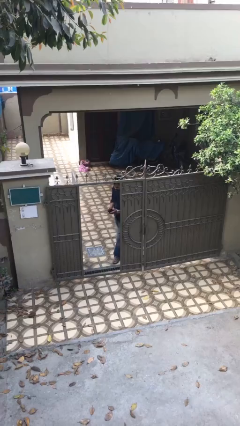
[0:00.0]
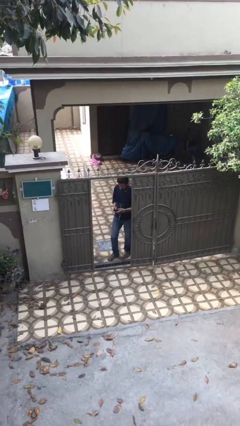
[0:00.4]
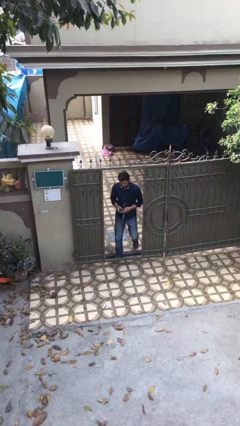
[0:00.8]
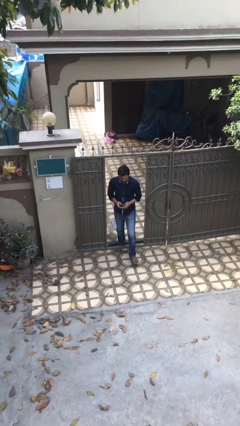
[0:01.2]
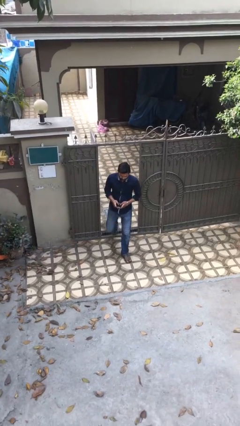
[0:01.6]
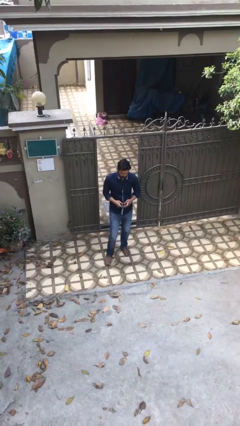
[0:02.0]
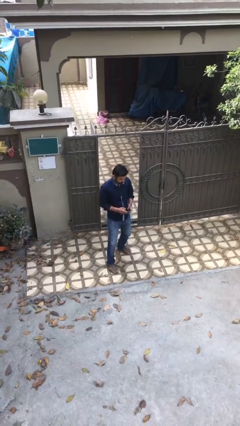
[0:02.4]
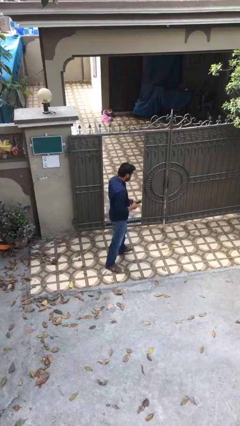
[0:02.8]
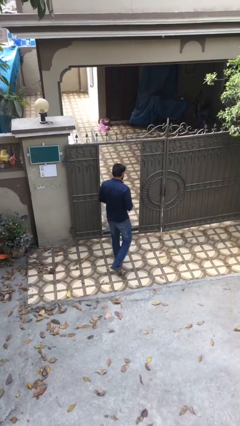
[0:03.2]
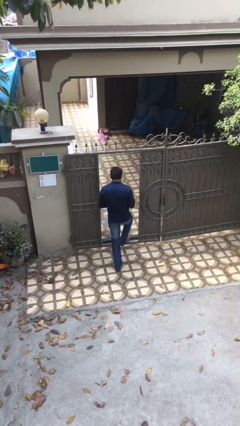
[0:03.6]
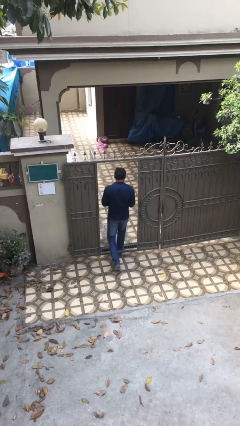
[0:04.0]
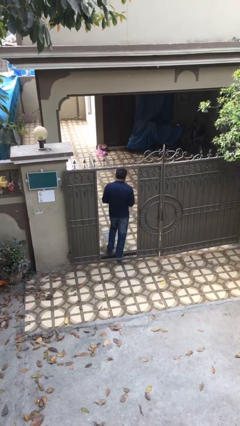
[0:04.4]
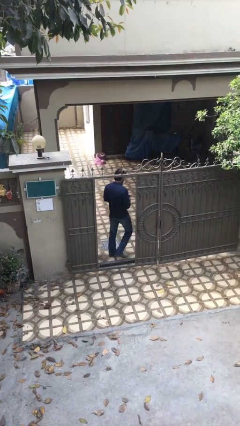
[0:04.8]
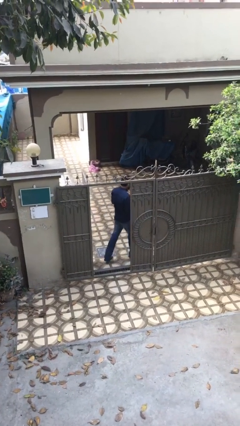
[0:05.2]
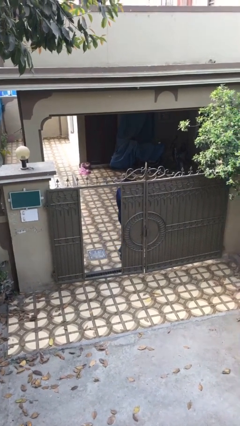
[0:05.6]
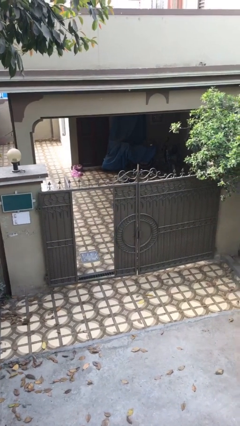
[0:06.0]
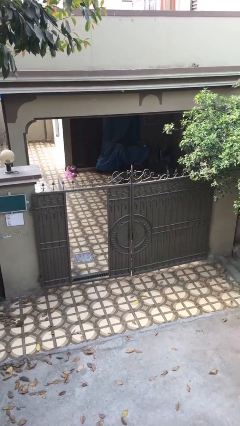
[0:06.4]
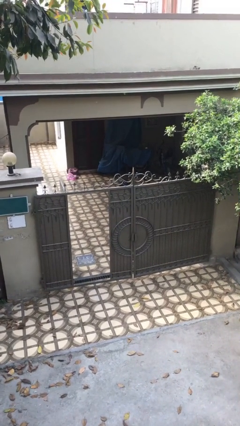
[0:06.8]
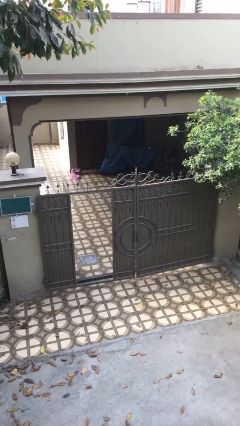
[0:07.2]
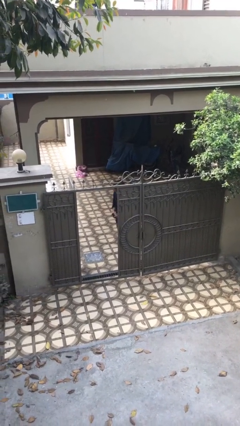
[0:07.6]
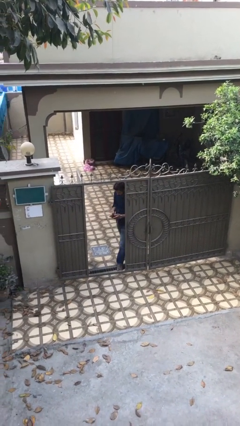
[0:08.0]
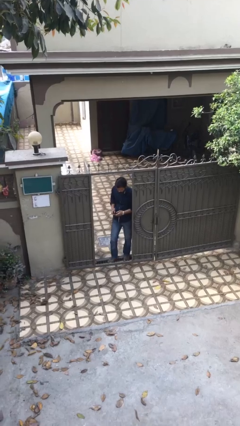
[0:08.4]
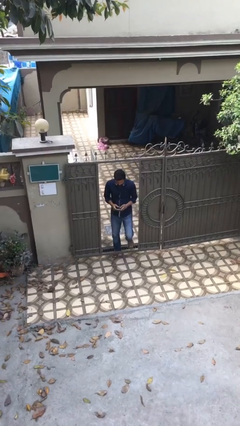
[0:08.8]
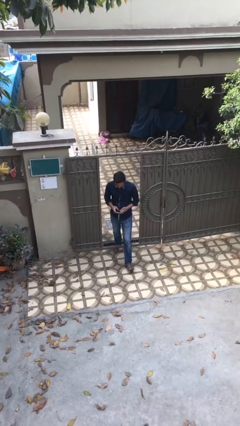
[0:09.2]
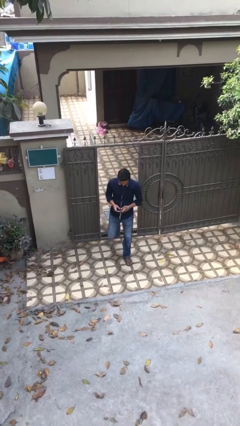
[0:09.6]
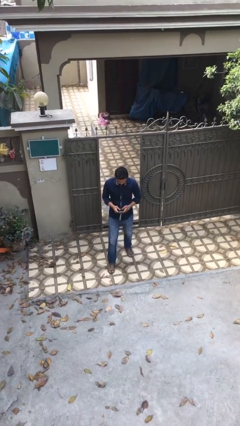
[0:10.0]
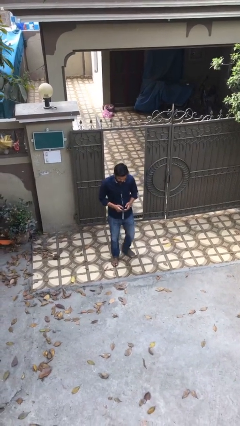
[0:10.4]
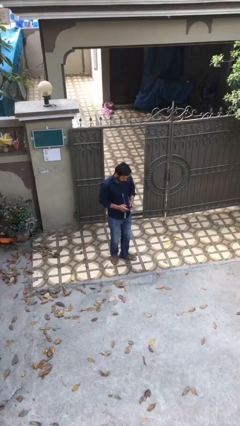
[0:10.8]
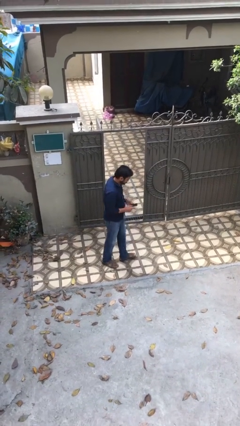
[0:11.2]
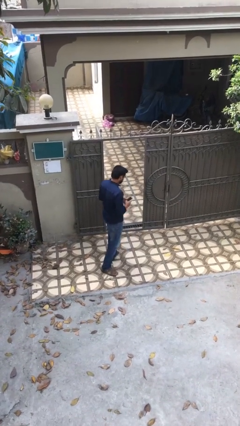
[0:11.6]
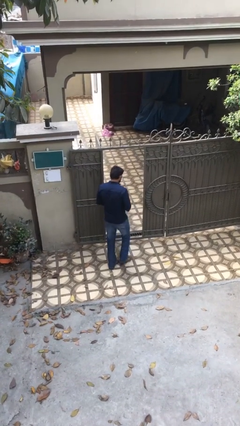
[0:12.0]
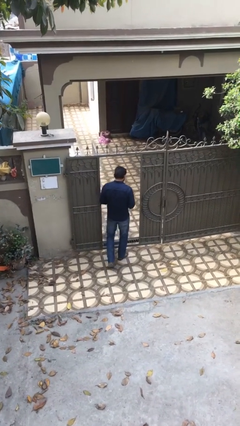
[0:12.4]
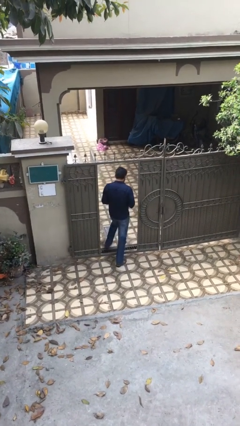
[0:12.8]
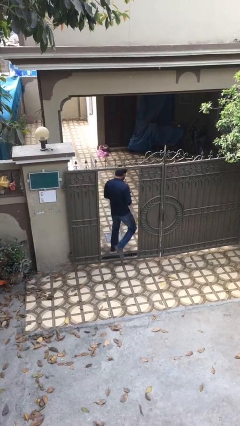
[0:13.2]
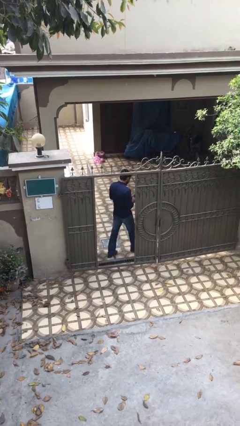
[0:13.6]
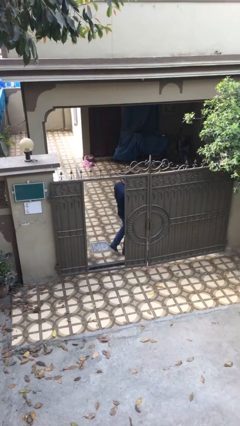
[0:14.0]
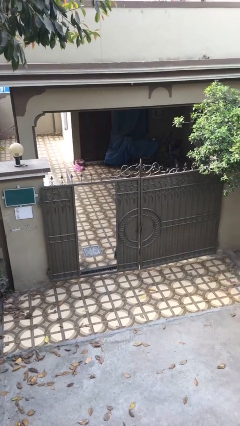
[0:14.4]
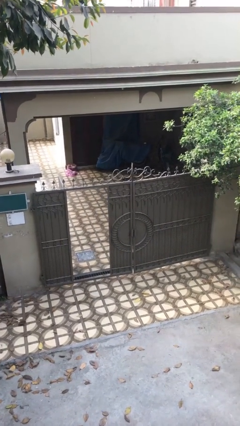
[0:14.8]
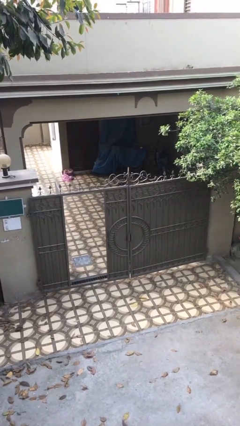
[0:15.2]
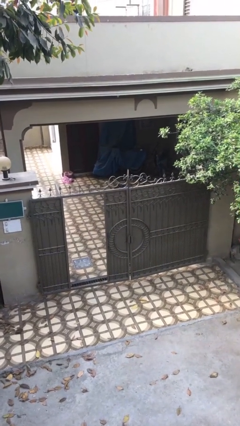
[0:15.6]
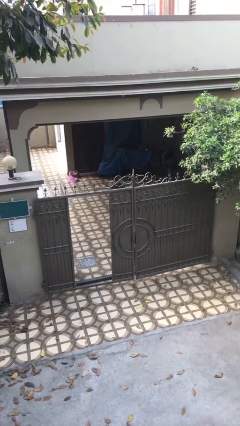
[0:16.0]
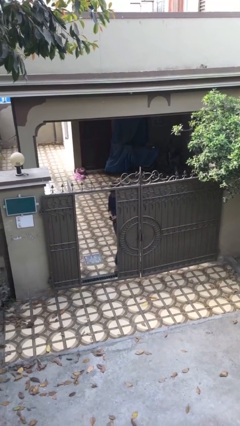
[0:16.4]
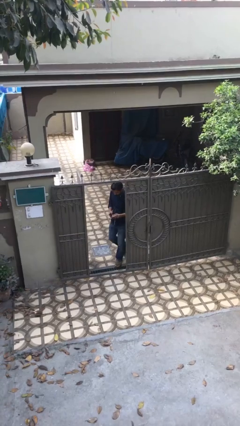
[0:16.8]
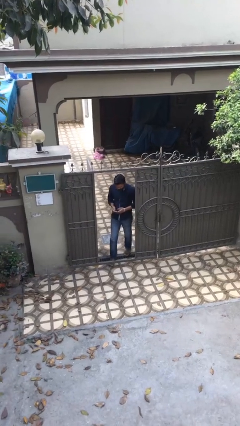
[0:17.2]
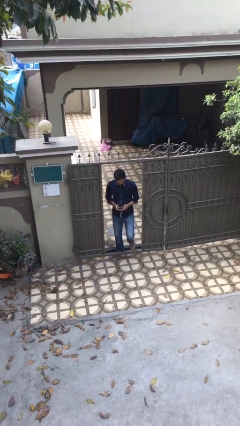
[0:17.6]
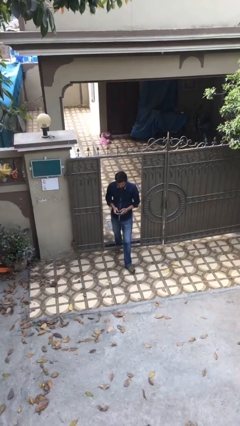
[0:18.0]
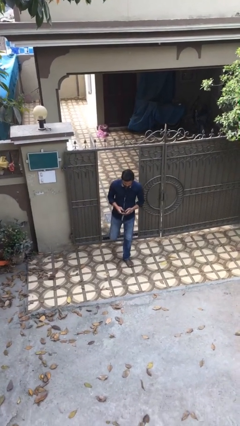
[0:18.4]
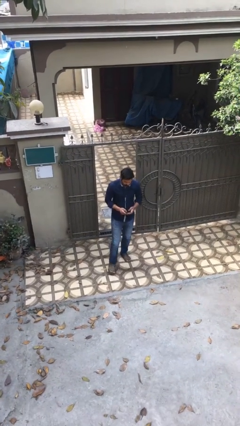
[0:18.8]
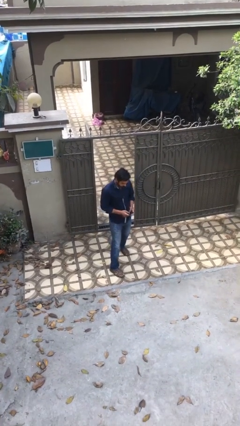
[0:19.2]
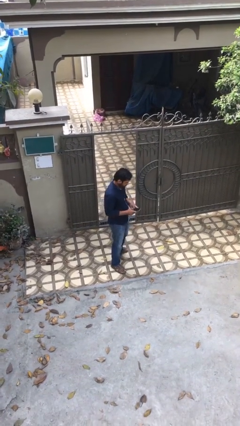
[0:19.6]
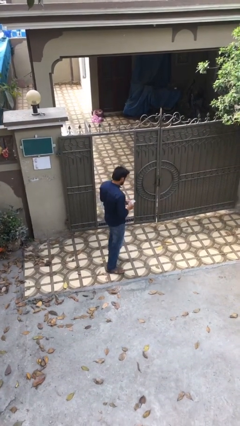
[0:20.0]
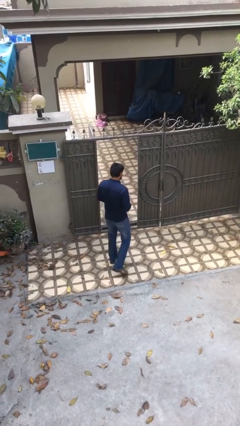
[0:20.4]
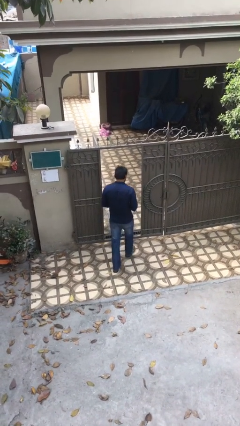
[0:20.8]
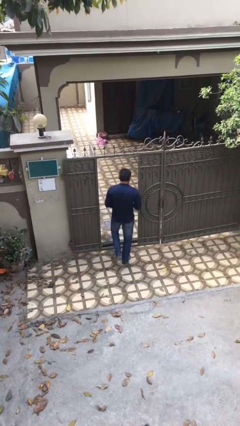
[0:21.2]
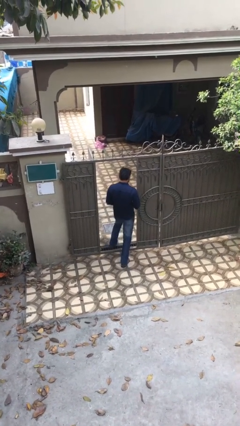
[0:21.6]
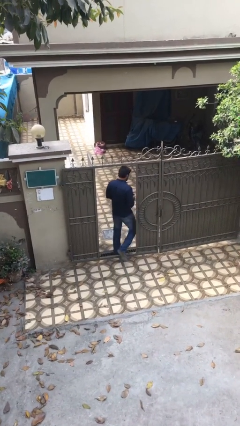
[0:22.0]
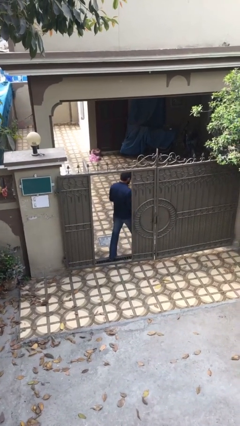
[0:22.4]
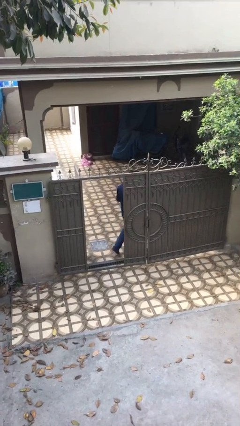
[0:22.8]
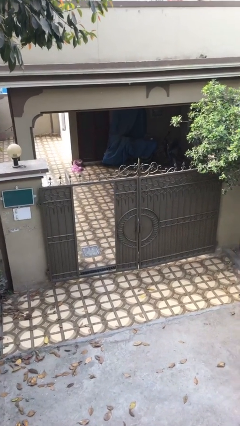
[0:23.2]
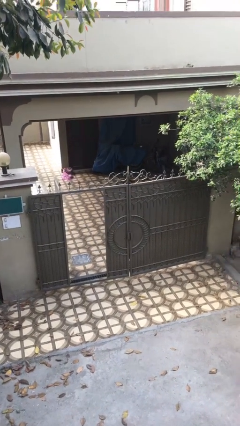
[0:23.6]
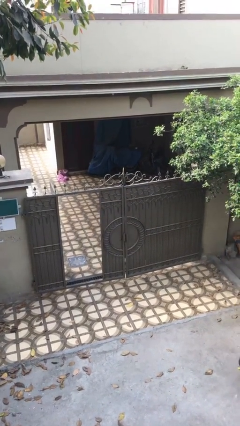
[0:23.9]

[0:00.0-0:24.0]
person texts on phone

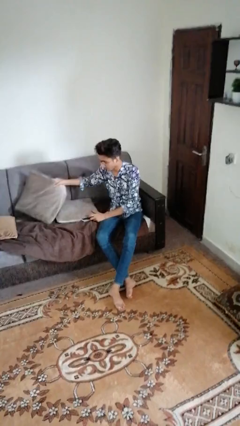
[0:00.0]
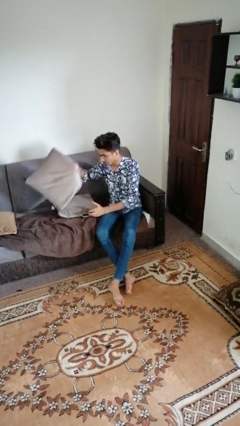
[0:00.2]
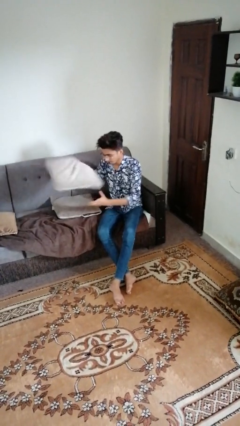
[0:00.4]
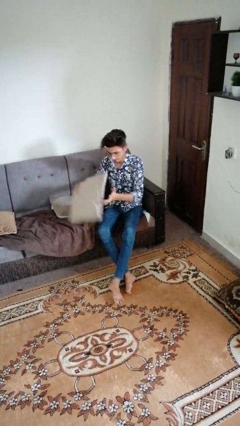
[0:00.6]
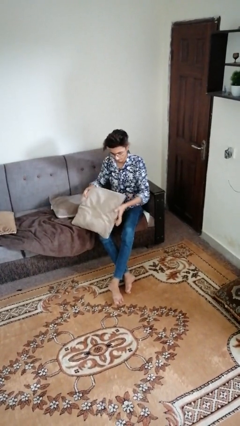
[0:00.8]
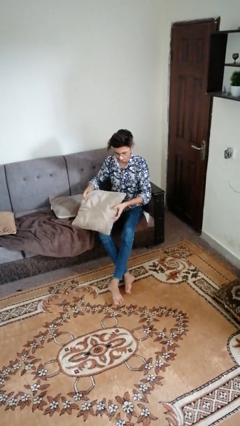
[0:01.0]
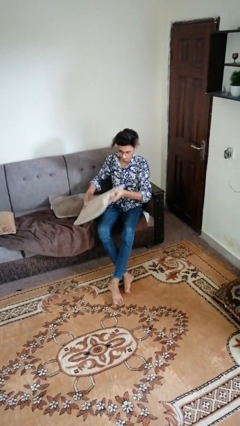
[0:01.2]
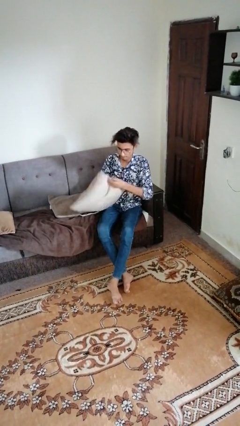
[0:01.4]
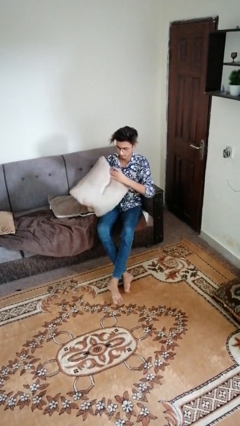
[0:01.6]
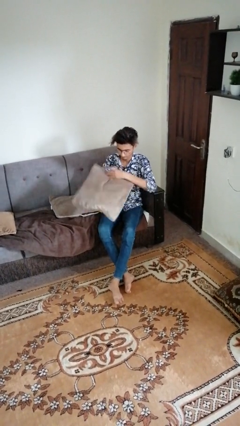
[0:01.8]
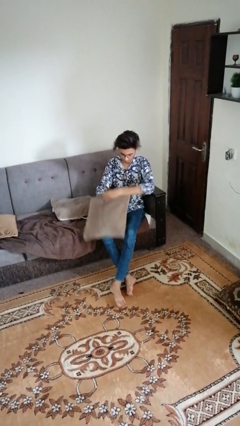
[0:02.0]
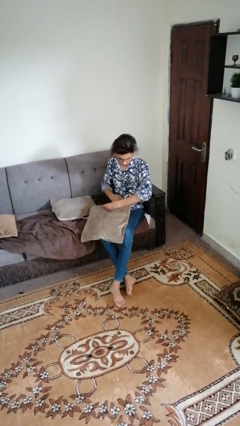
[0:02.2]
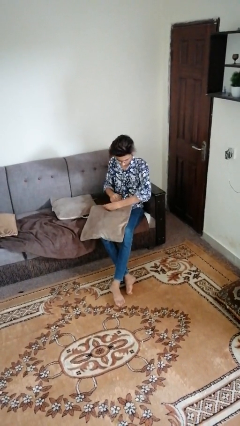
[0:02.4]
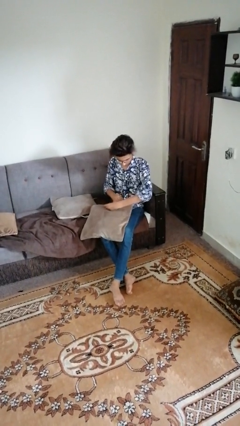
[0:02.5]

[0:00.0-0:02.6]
person searches in couch

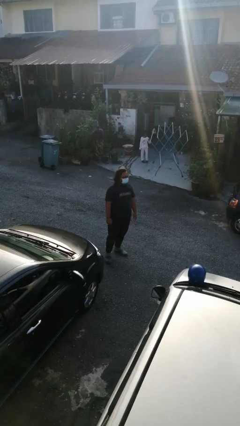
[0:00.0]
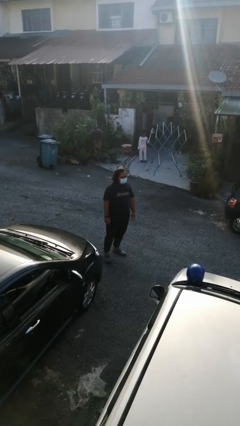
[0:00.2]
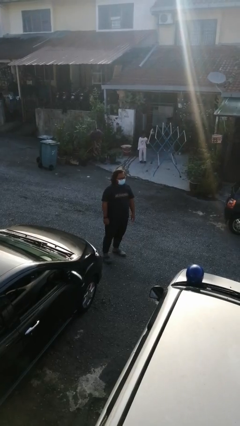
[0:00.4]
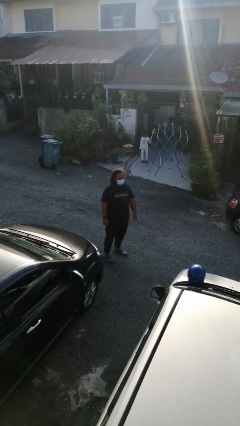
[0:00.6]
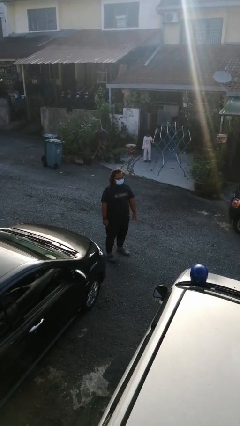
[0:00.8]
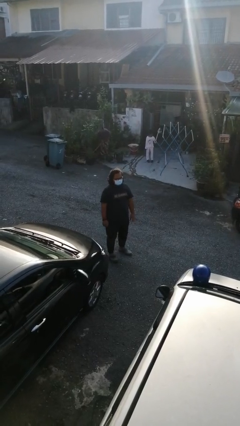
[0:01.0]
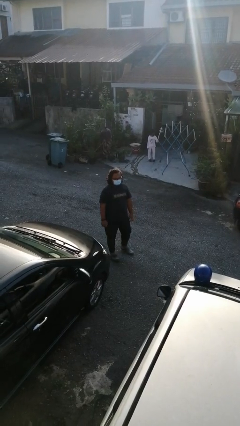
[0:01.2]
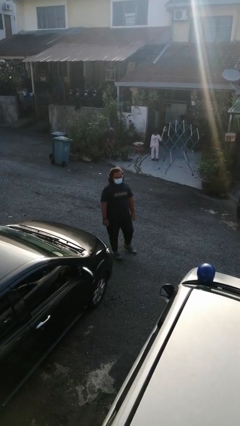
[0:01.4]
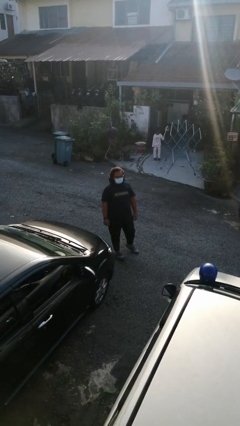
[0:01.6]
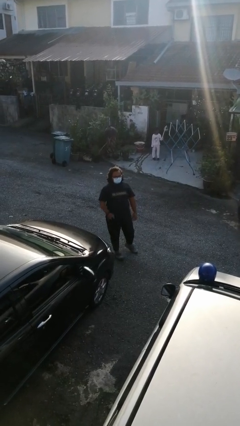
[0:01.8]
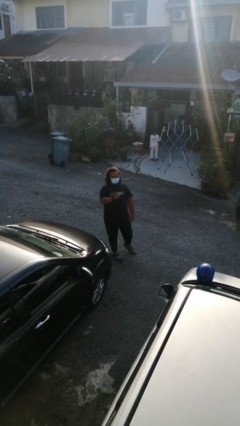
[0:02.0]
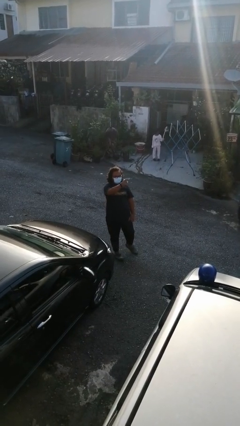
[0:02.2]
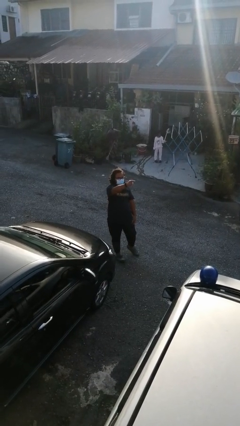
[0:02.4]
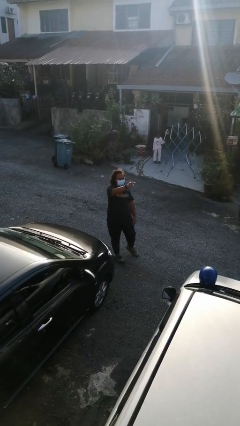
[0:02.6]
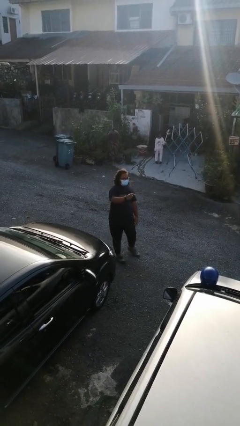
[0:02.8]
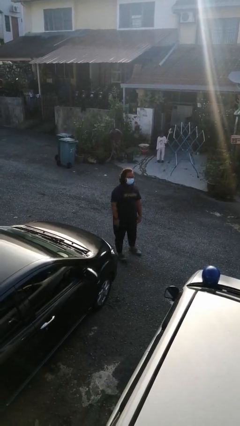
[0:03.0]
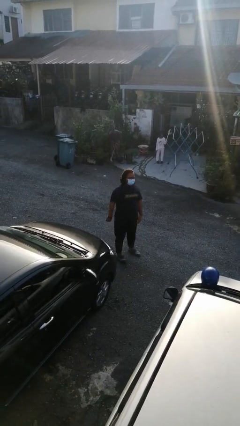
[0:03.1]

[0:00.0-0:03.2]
person points at person
